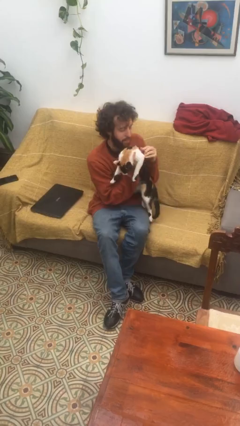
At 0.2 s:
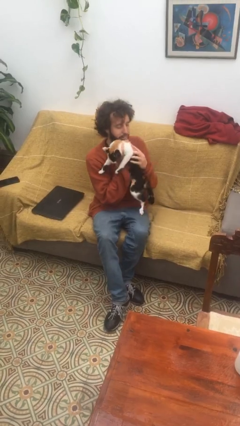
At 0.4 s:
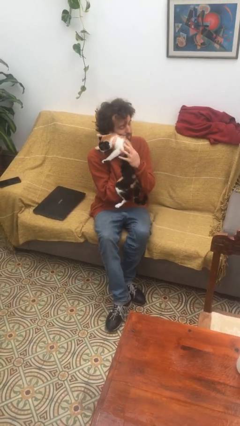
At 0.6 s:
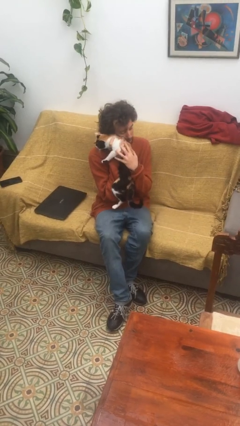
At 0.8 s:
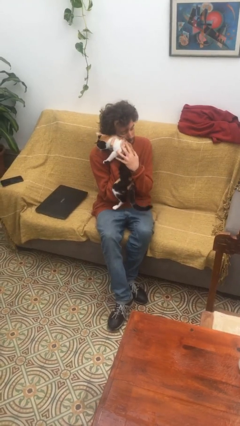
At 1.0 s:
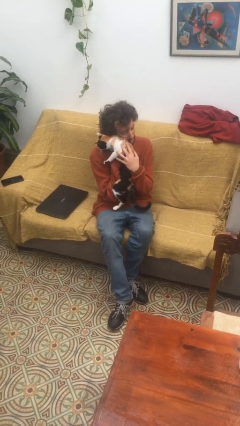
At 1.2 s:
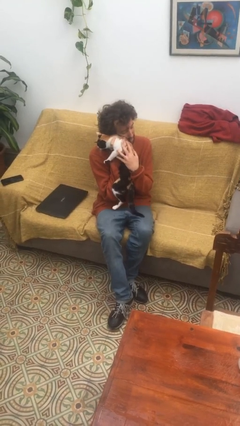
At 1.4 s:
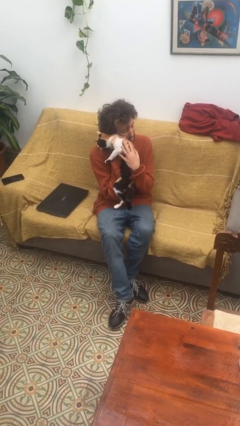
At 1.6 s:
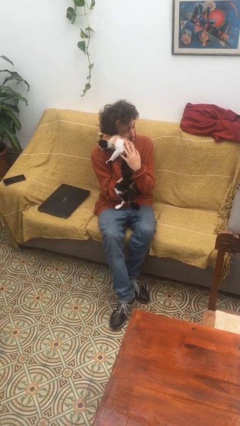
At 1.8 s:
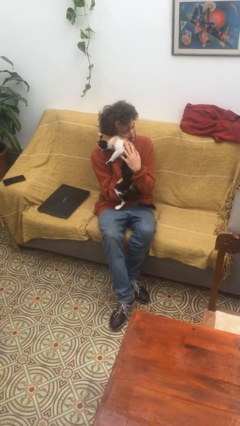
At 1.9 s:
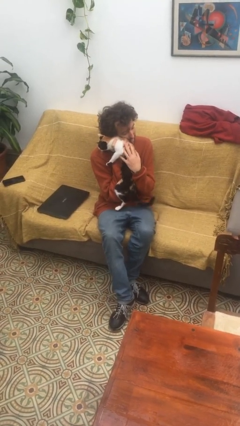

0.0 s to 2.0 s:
person hugs cat

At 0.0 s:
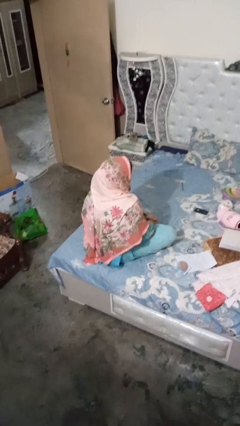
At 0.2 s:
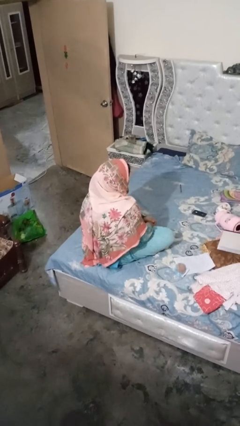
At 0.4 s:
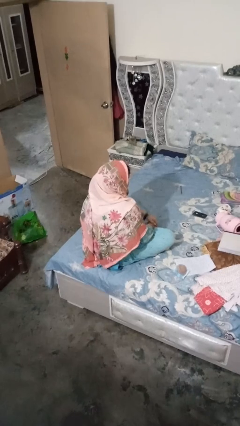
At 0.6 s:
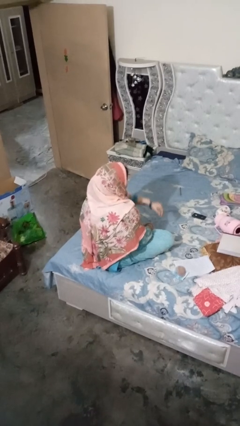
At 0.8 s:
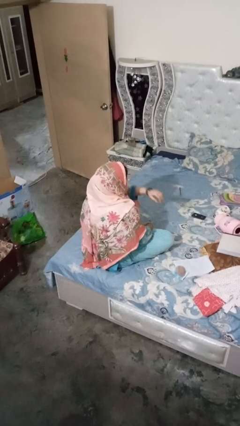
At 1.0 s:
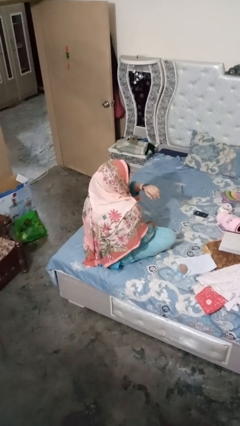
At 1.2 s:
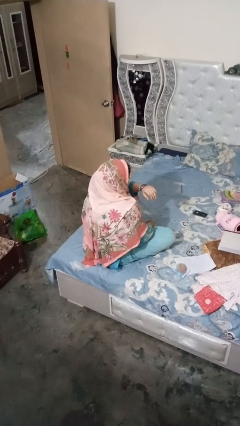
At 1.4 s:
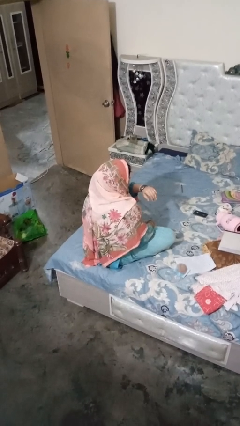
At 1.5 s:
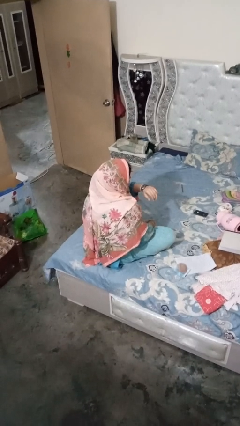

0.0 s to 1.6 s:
person gestures watch closely

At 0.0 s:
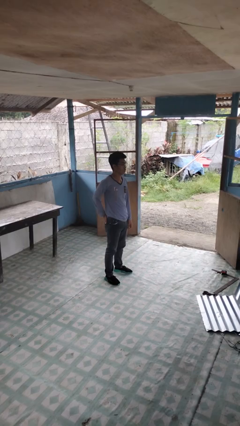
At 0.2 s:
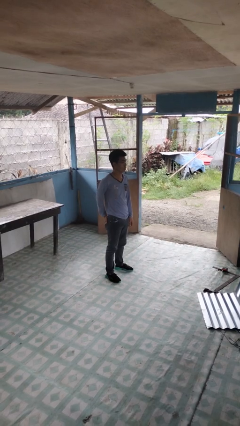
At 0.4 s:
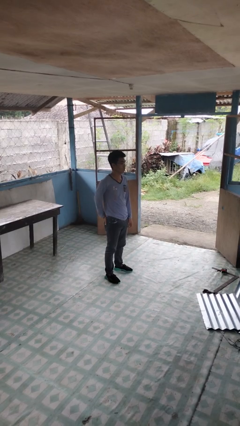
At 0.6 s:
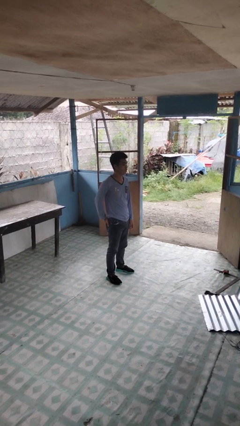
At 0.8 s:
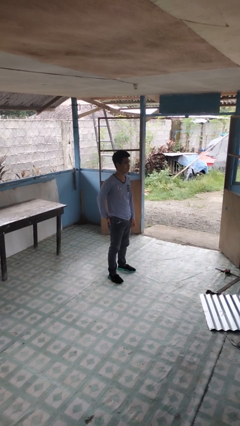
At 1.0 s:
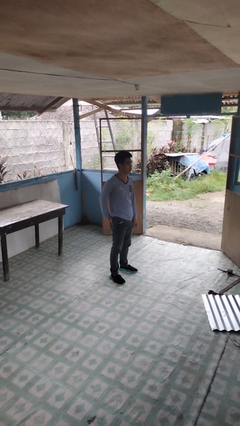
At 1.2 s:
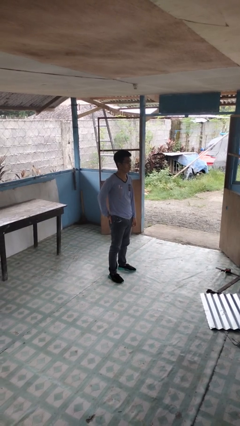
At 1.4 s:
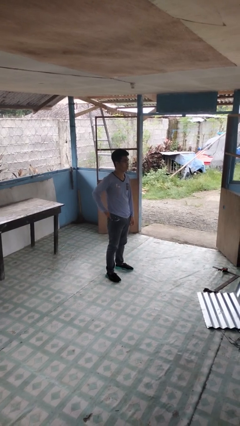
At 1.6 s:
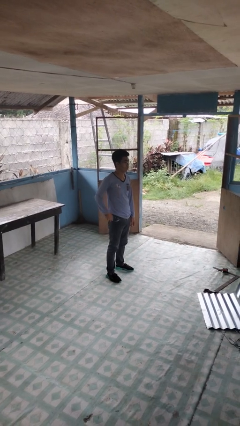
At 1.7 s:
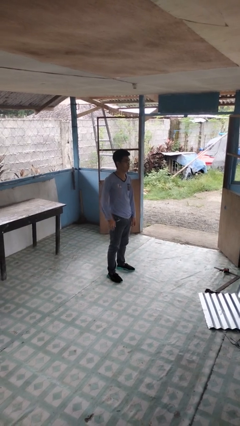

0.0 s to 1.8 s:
person puts hands in back pockets

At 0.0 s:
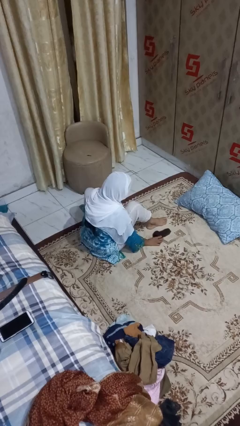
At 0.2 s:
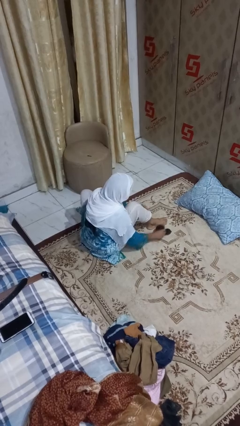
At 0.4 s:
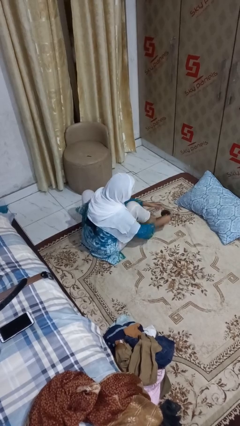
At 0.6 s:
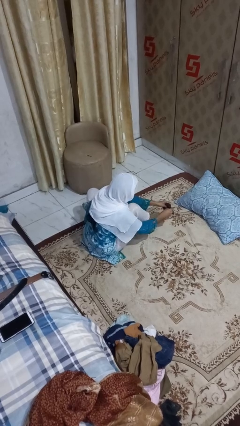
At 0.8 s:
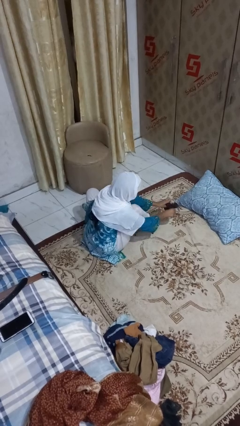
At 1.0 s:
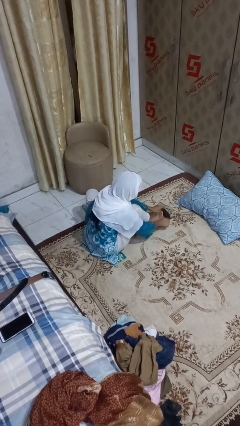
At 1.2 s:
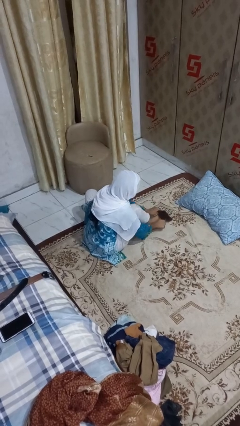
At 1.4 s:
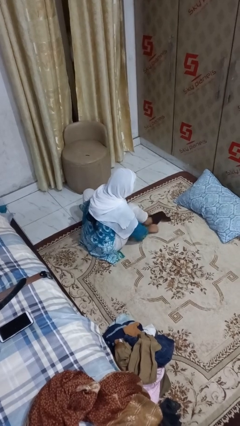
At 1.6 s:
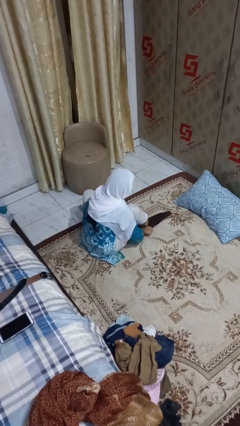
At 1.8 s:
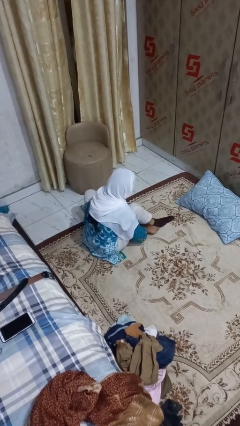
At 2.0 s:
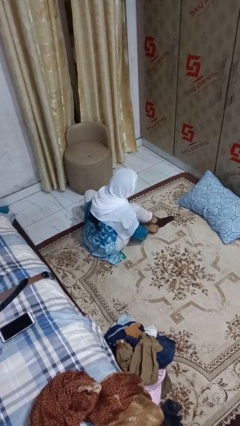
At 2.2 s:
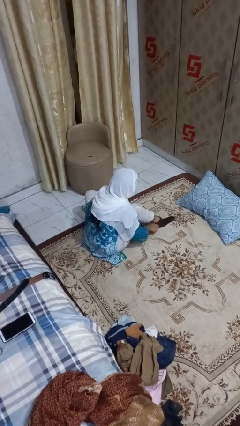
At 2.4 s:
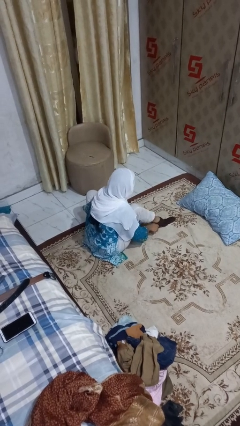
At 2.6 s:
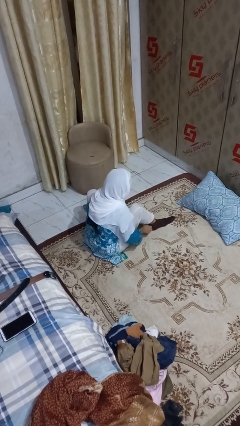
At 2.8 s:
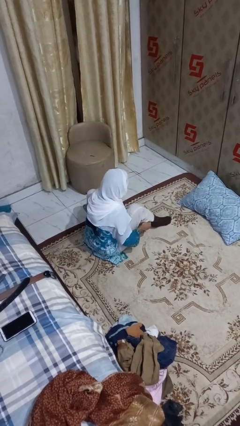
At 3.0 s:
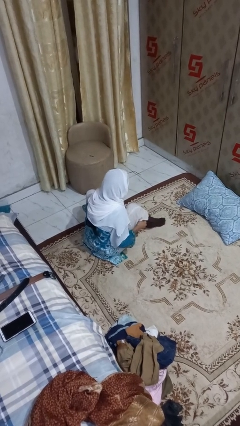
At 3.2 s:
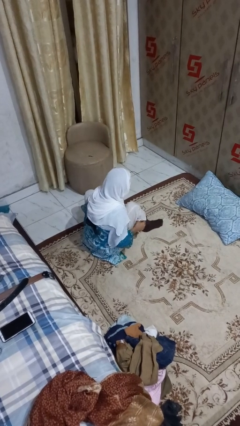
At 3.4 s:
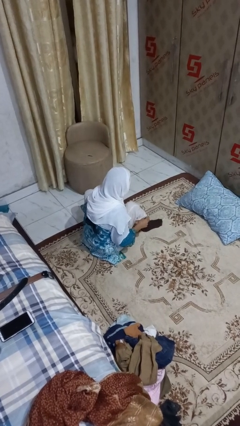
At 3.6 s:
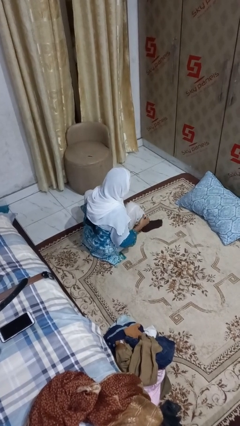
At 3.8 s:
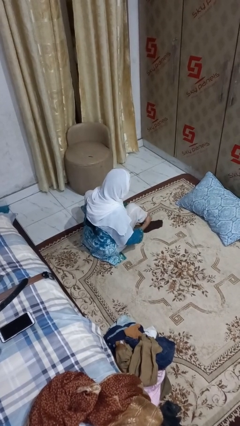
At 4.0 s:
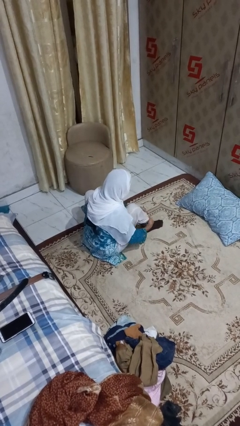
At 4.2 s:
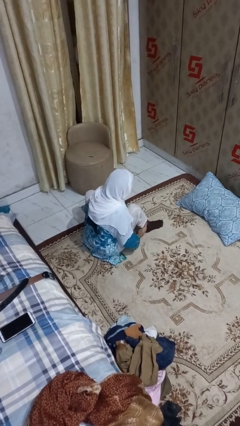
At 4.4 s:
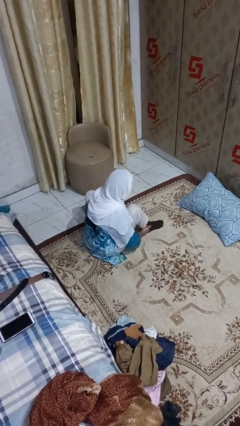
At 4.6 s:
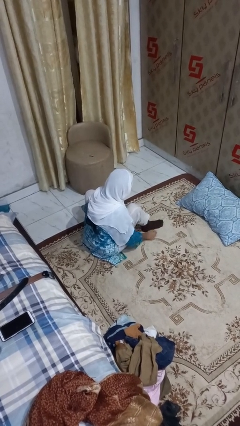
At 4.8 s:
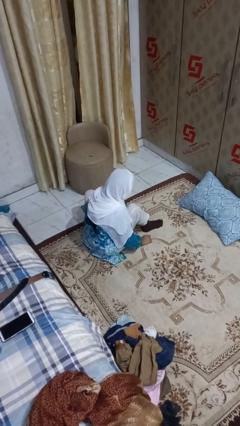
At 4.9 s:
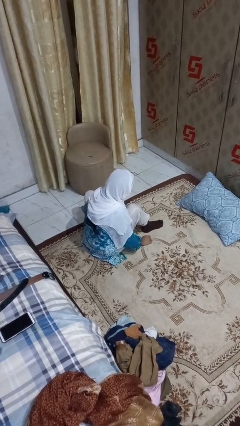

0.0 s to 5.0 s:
person puts on socks

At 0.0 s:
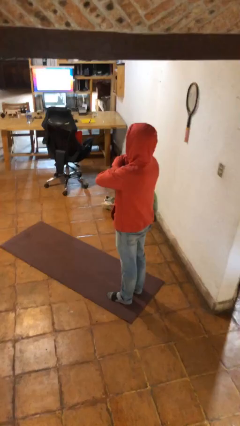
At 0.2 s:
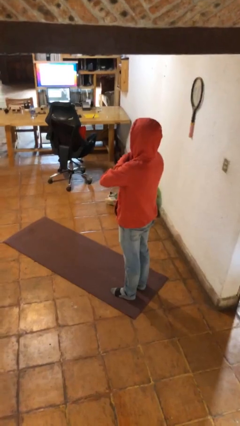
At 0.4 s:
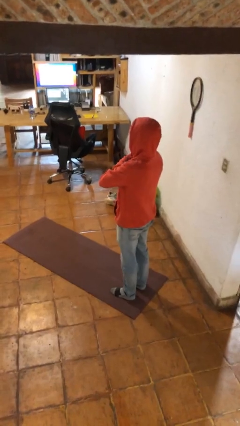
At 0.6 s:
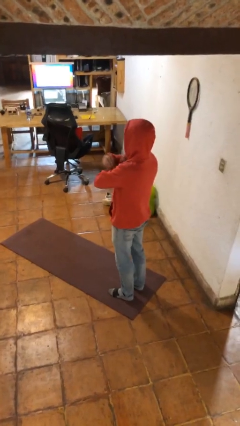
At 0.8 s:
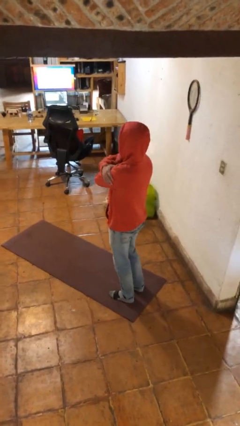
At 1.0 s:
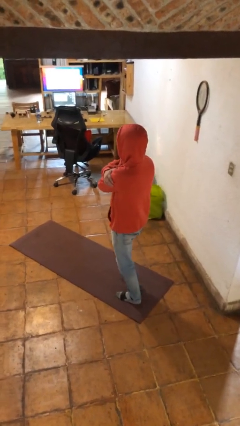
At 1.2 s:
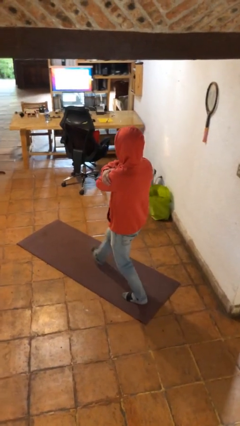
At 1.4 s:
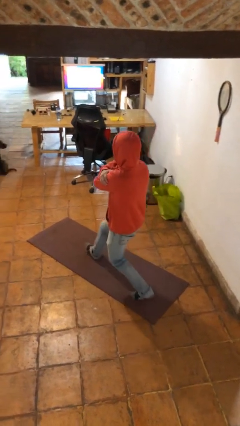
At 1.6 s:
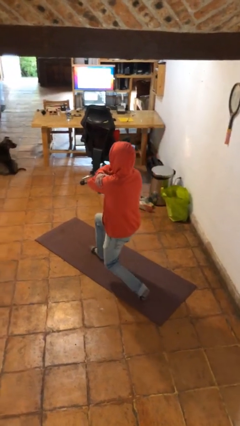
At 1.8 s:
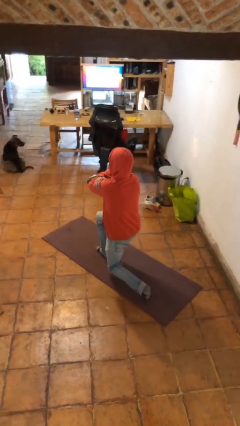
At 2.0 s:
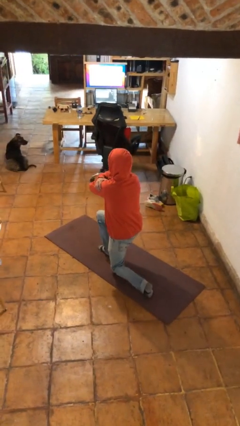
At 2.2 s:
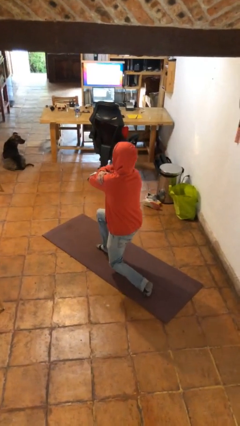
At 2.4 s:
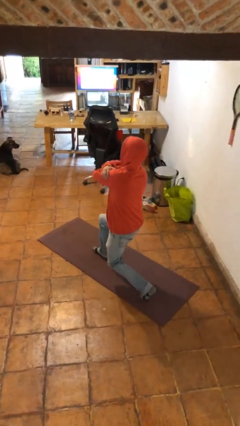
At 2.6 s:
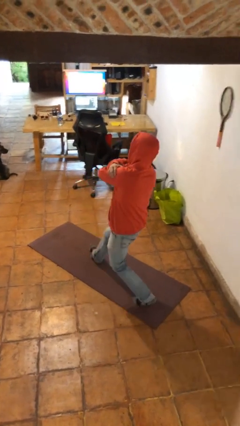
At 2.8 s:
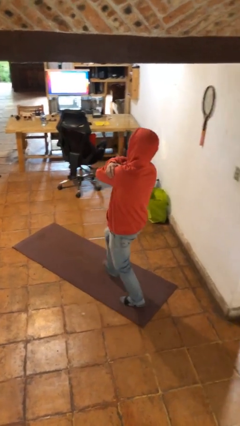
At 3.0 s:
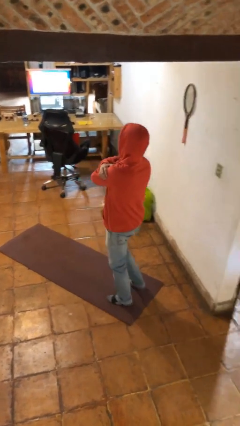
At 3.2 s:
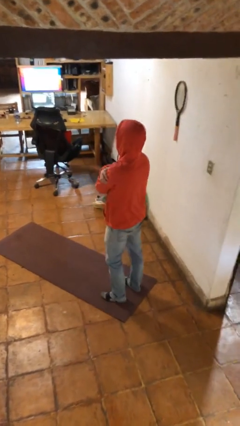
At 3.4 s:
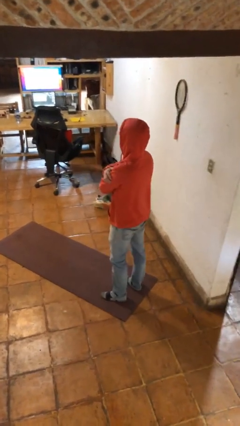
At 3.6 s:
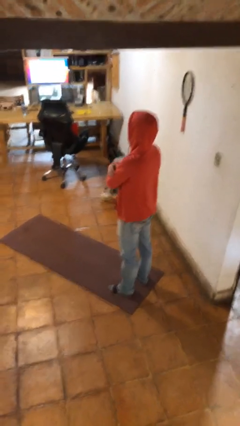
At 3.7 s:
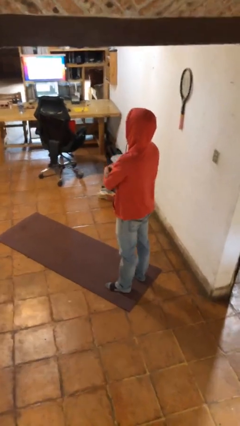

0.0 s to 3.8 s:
person exercises with lunges

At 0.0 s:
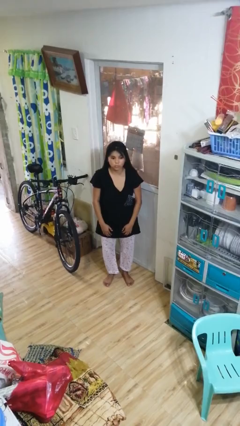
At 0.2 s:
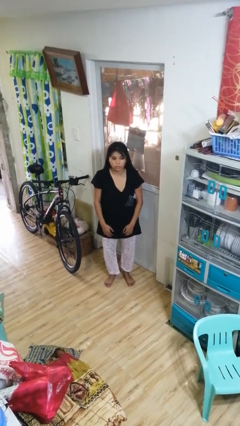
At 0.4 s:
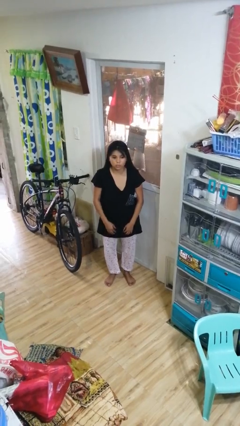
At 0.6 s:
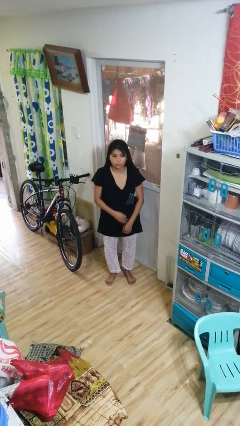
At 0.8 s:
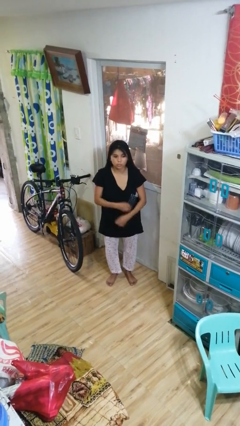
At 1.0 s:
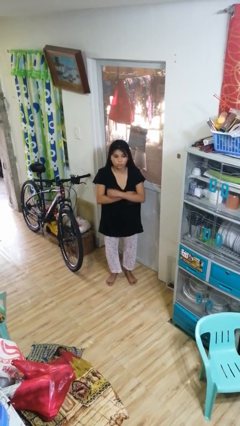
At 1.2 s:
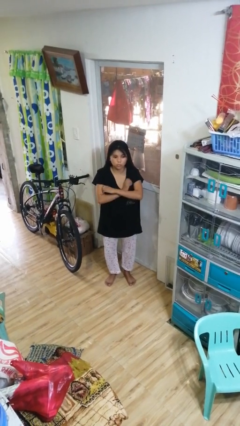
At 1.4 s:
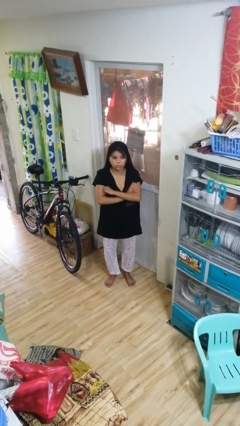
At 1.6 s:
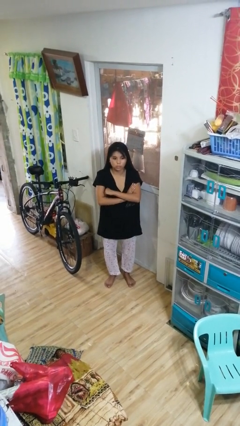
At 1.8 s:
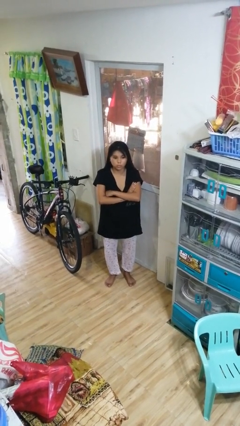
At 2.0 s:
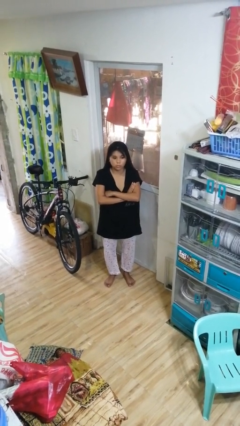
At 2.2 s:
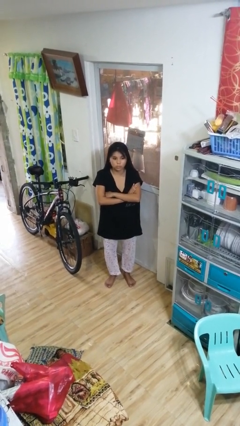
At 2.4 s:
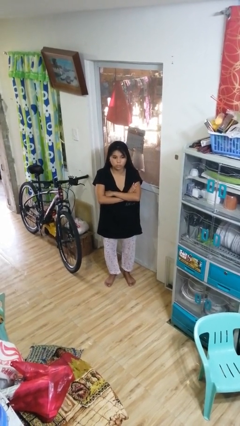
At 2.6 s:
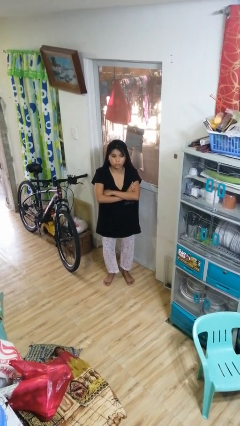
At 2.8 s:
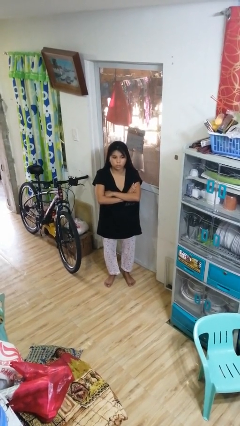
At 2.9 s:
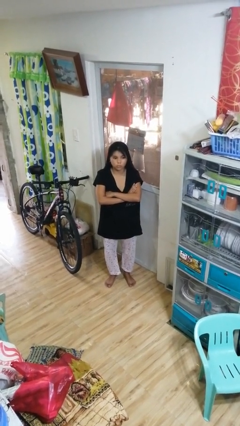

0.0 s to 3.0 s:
person crosses arms
